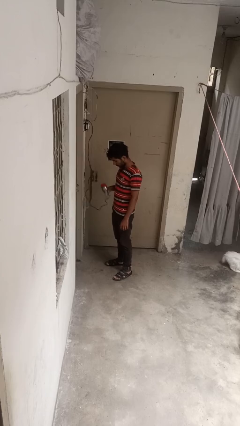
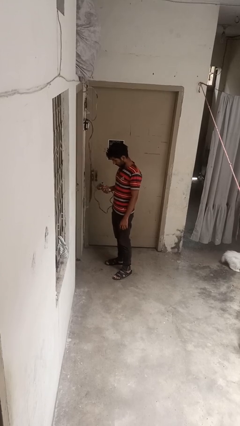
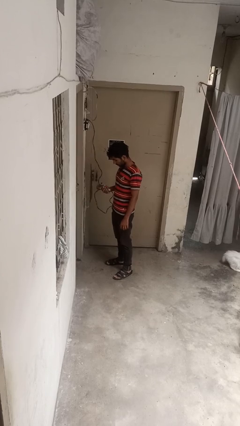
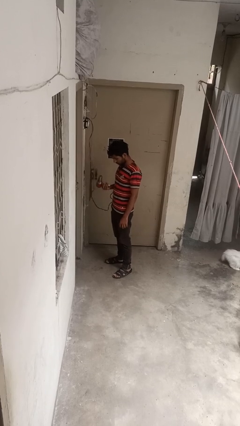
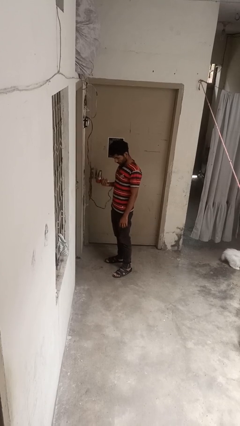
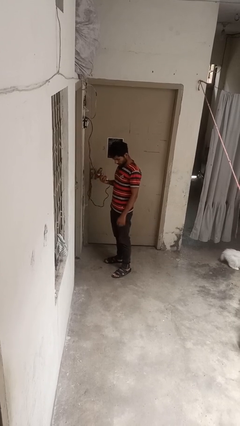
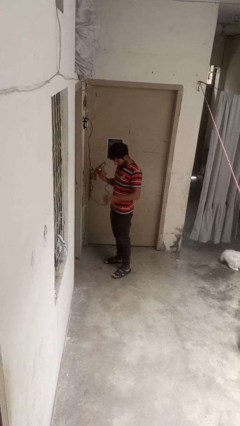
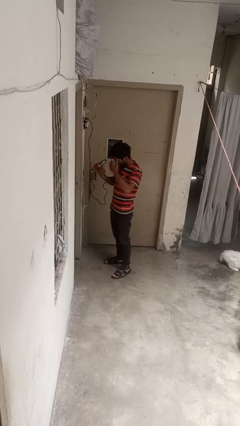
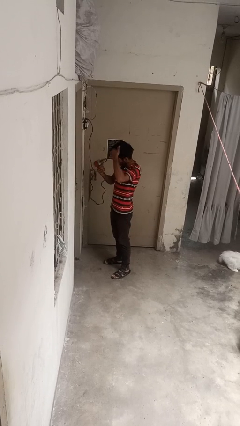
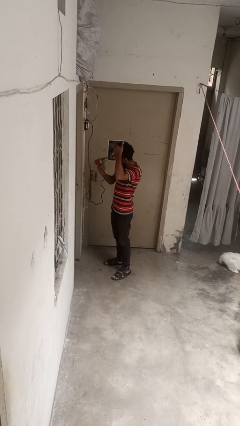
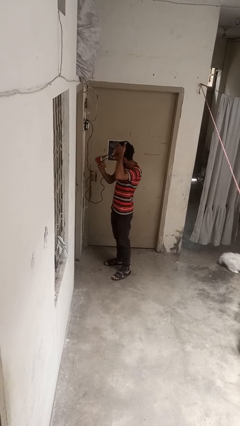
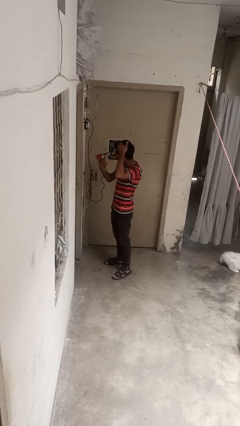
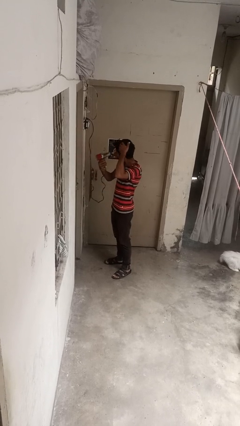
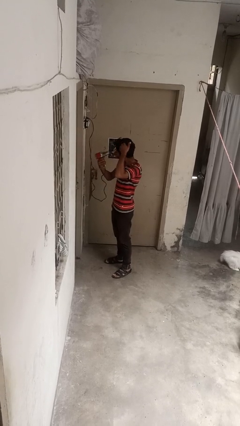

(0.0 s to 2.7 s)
person dries hair with hairdryer

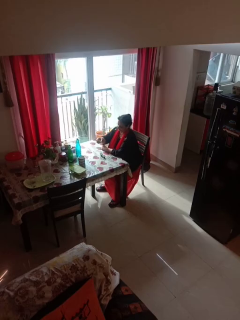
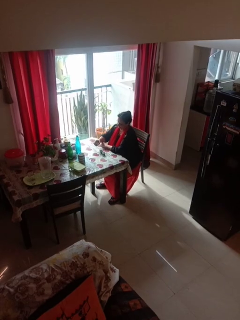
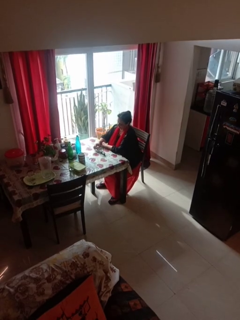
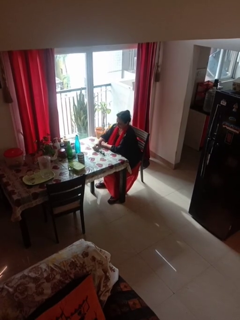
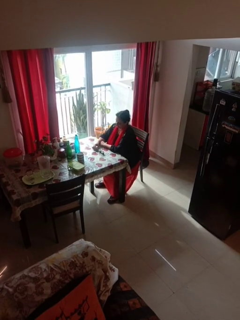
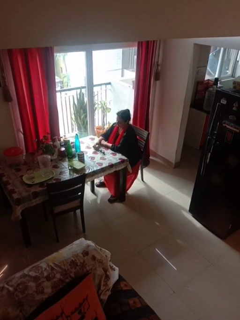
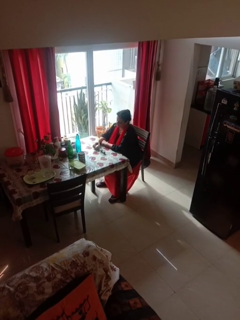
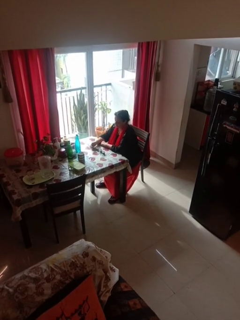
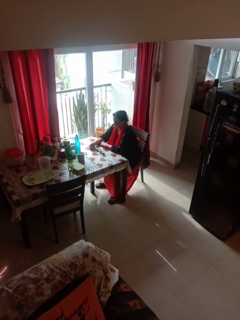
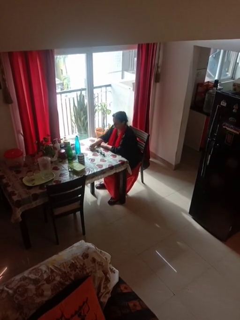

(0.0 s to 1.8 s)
person puts down object on table

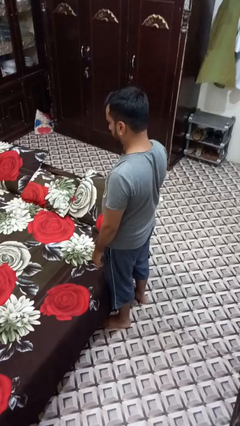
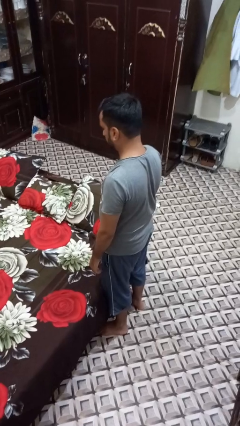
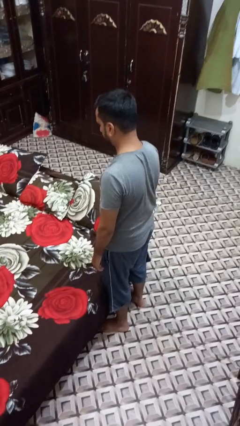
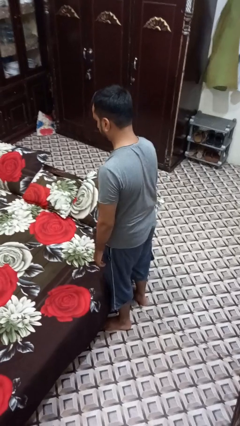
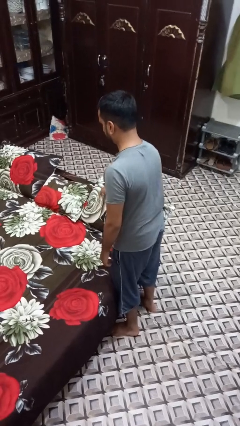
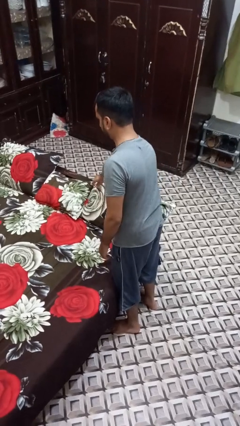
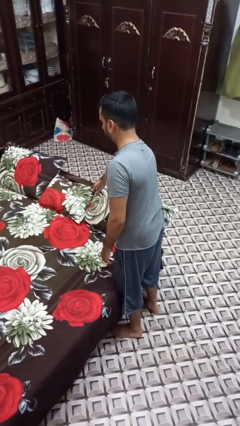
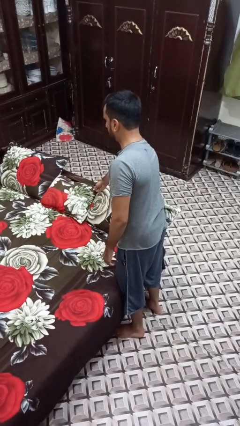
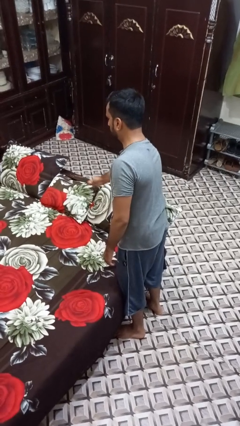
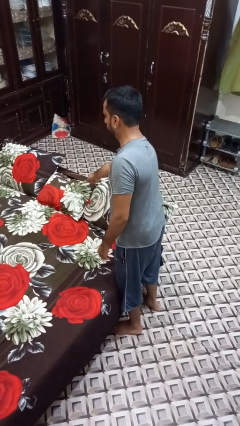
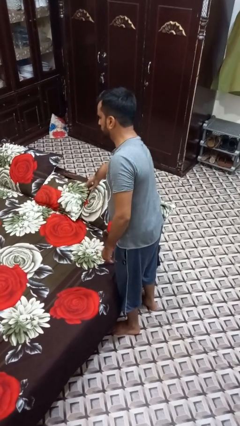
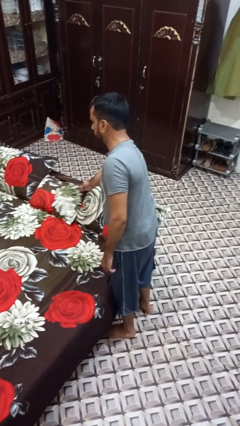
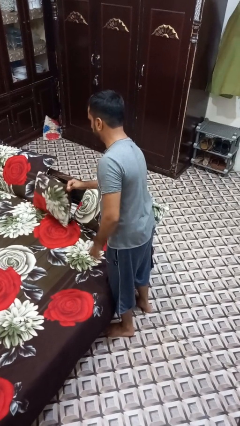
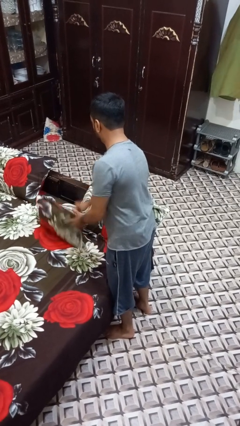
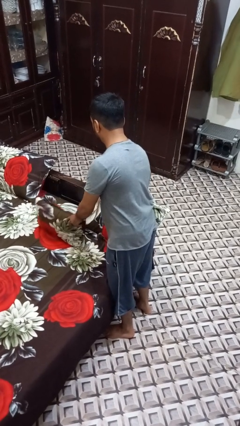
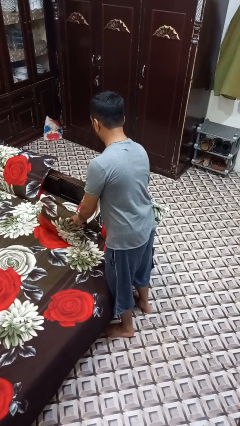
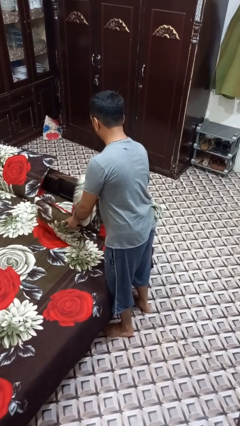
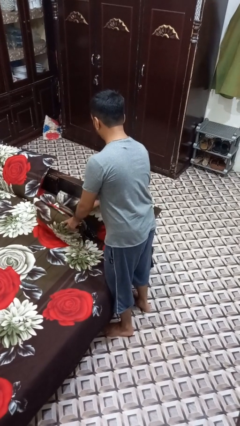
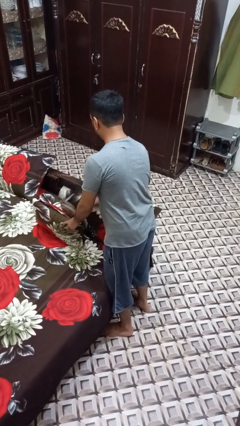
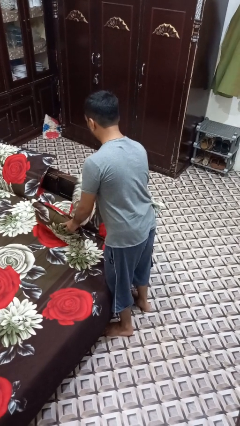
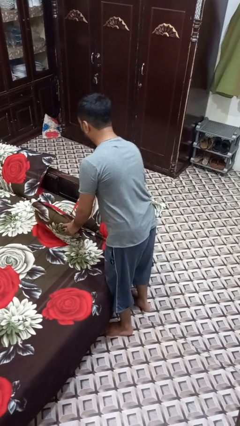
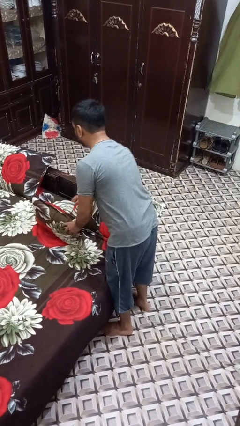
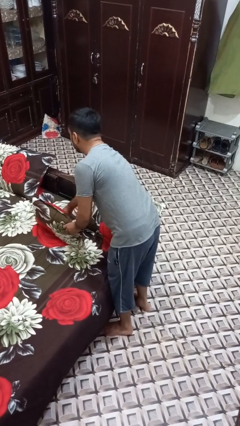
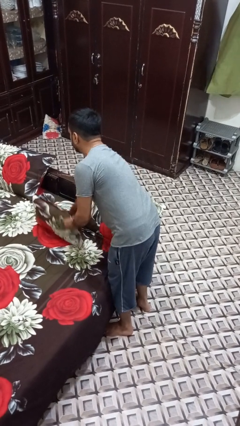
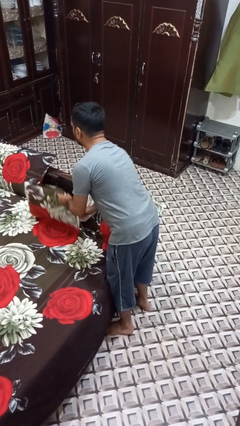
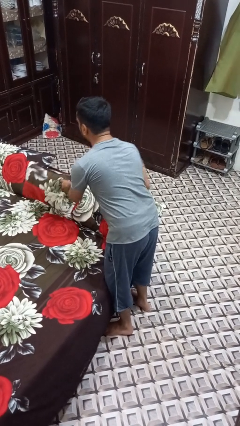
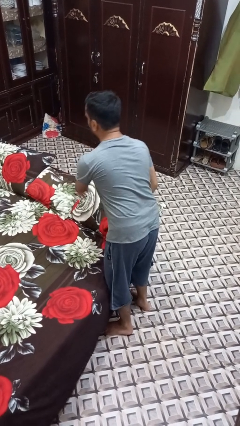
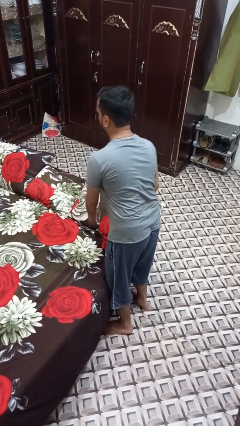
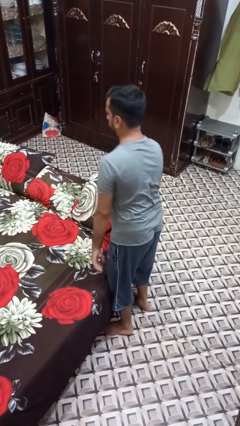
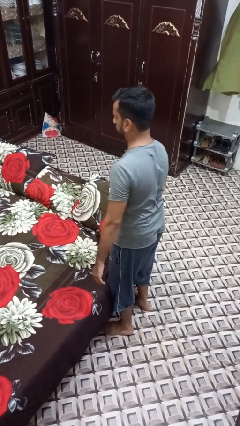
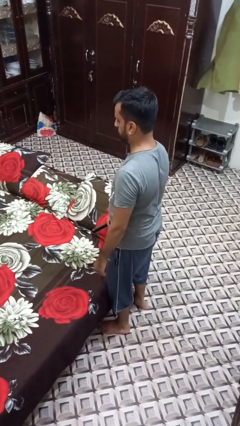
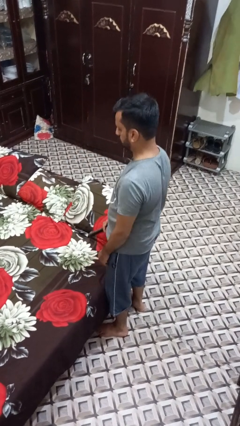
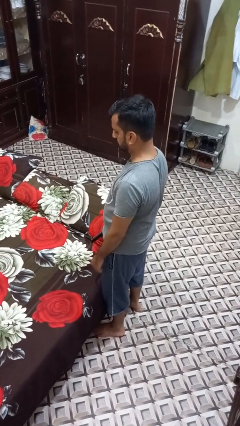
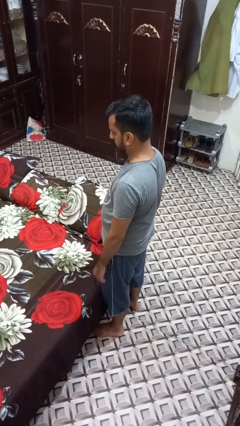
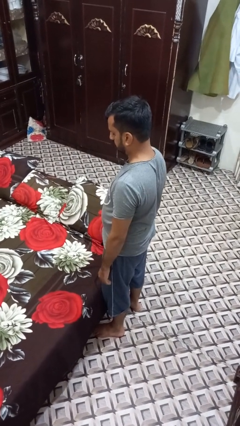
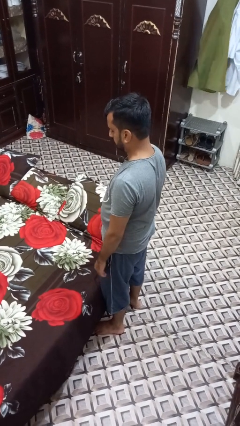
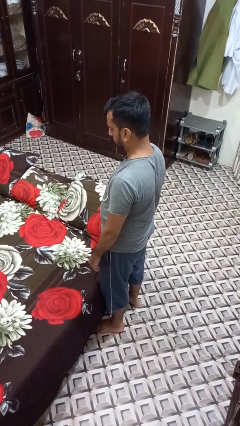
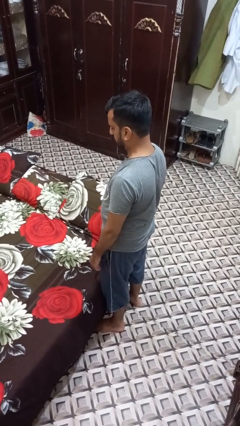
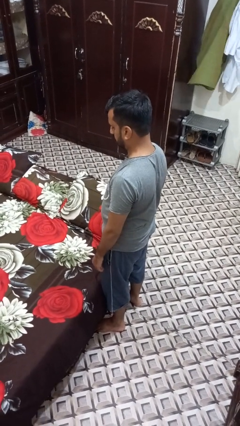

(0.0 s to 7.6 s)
person searches in couch

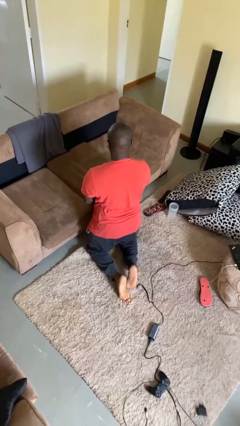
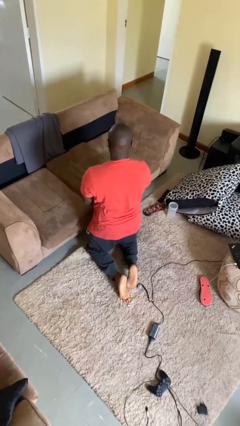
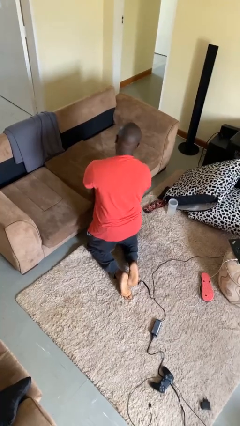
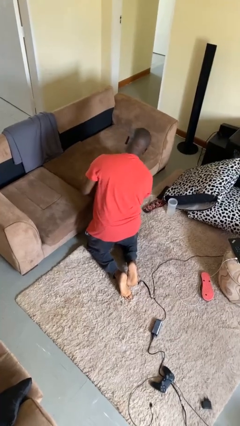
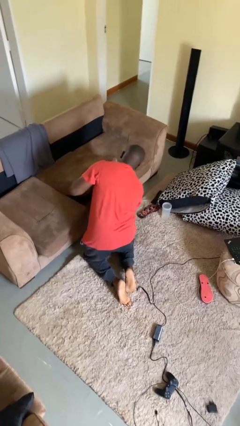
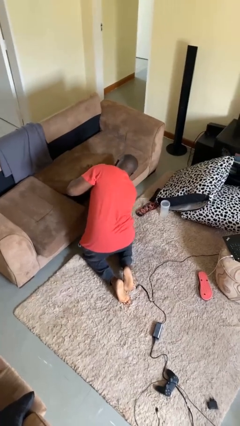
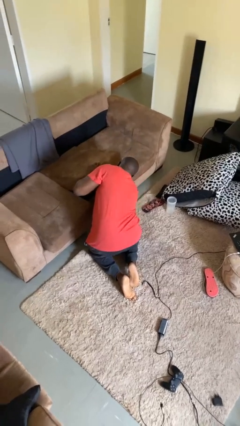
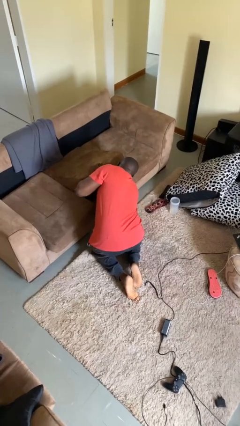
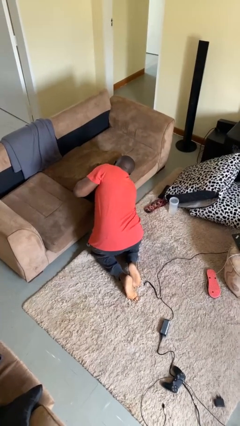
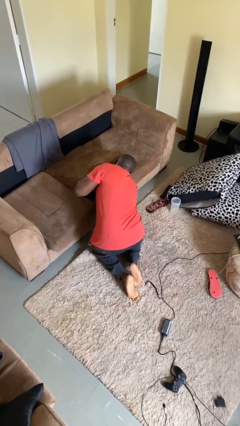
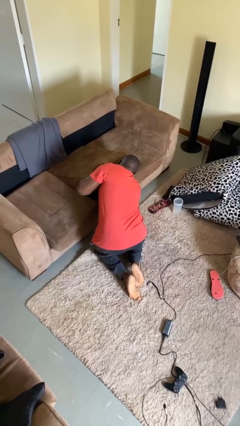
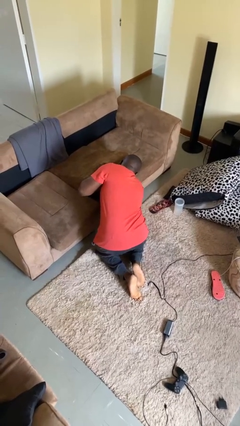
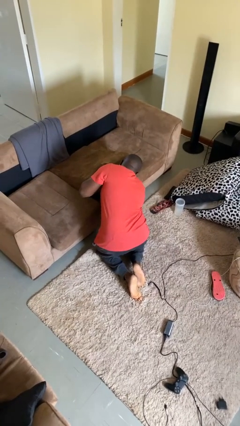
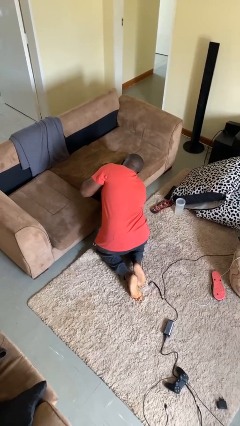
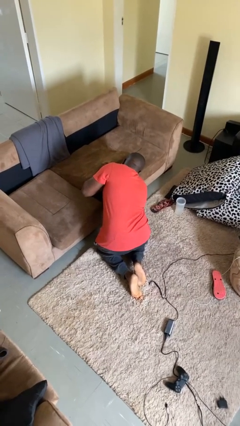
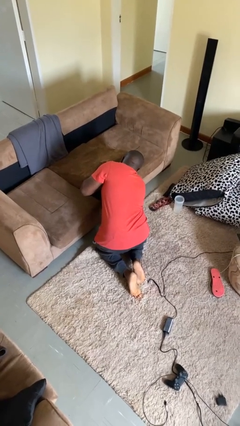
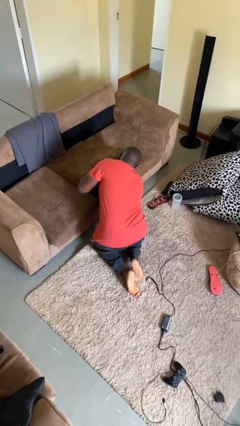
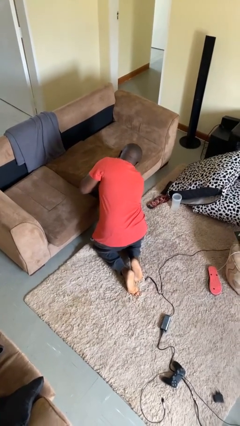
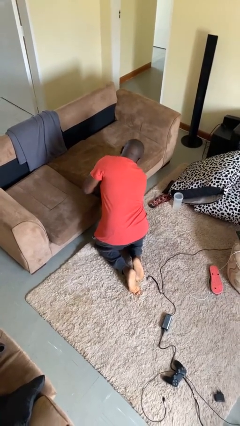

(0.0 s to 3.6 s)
person searches under couch

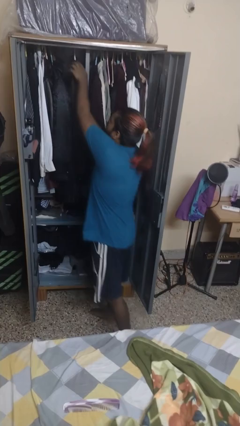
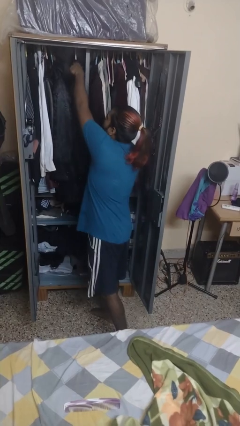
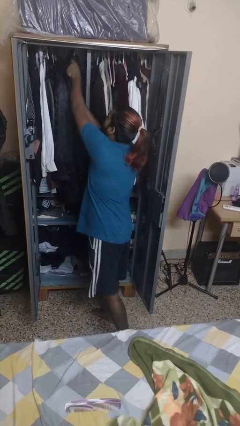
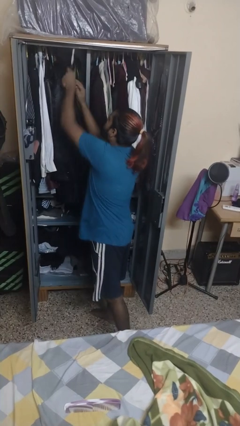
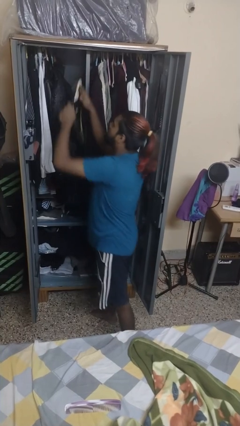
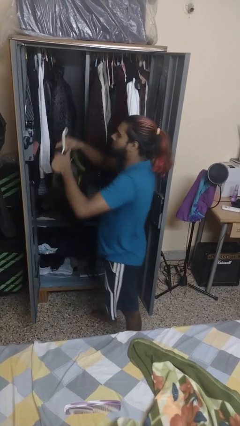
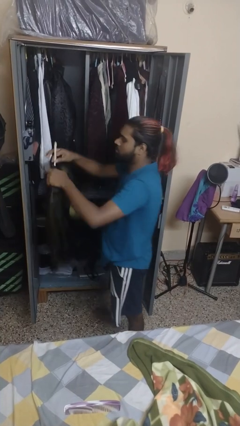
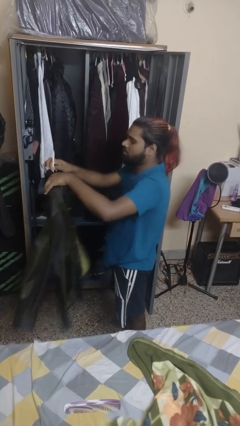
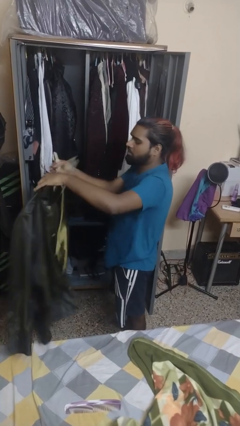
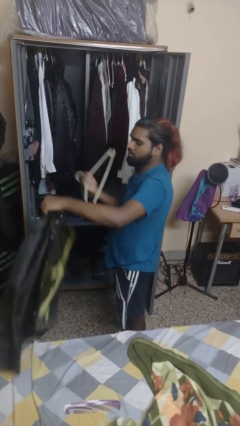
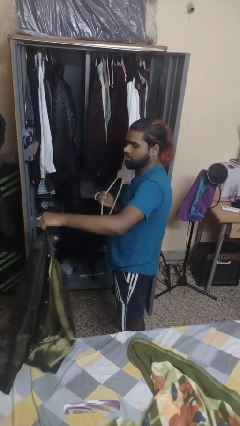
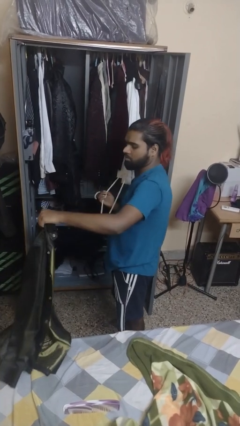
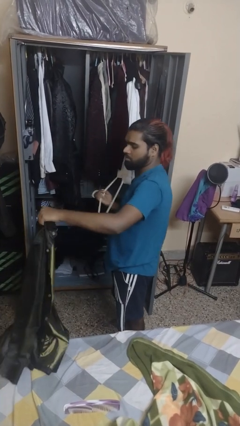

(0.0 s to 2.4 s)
person takes clothes from dresser
